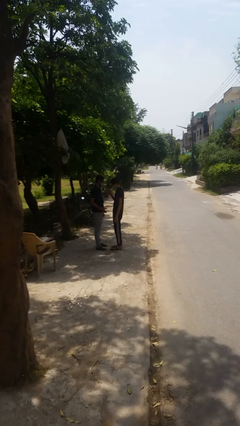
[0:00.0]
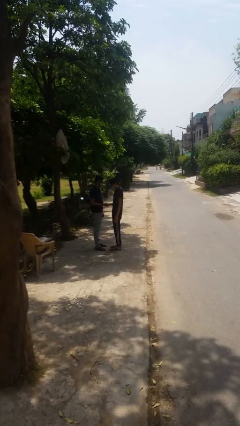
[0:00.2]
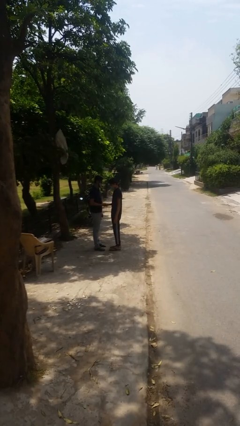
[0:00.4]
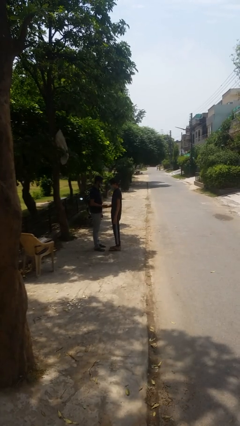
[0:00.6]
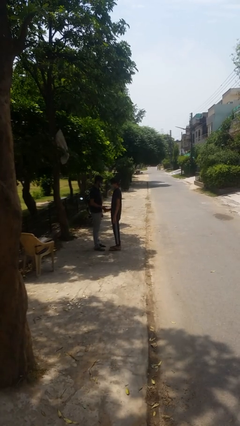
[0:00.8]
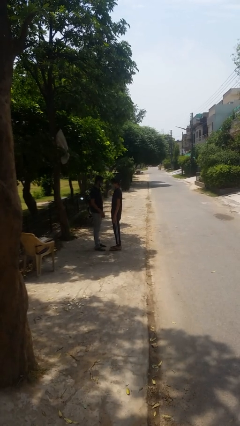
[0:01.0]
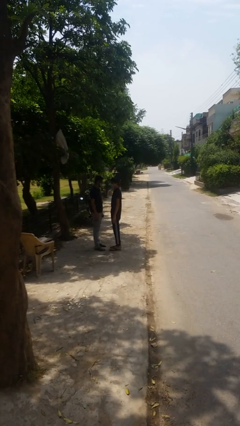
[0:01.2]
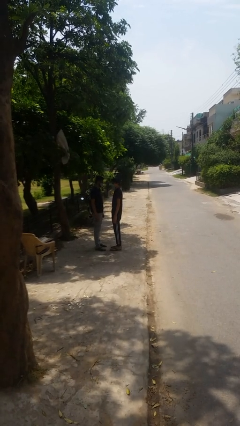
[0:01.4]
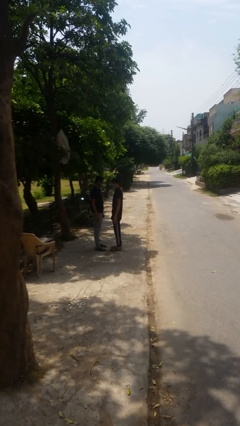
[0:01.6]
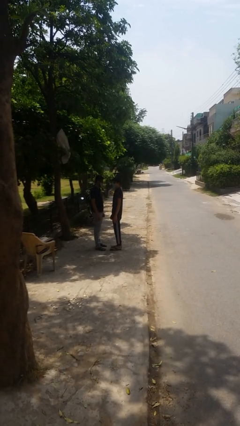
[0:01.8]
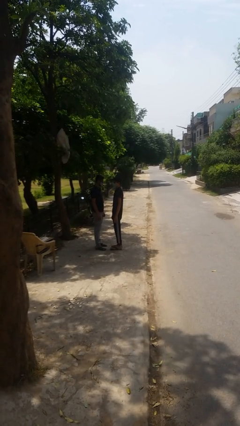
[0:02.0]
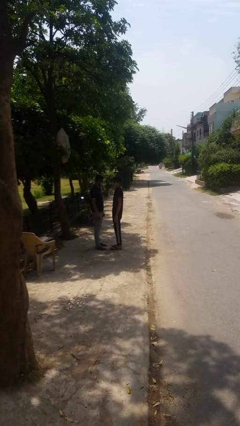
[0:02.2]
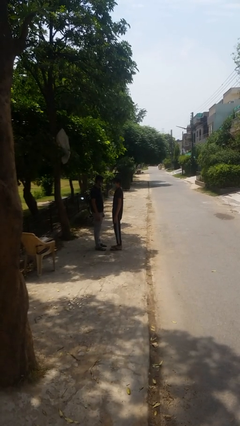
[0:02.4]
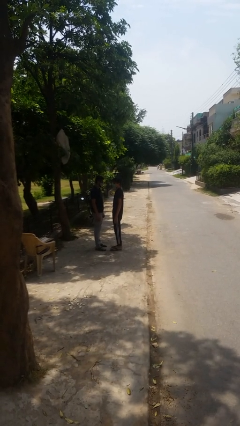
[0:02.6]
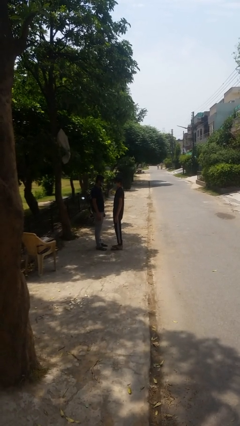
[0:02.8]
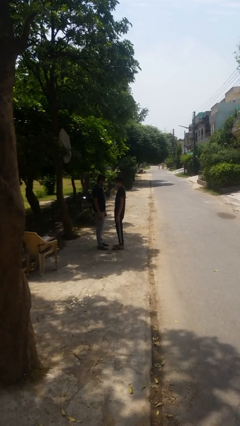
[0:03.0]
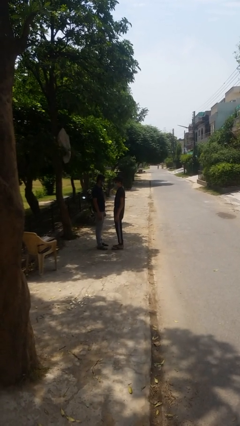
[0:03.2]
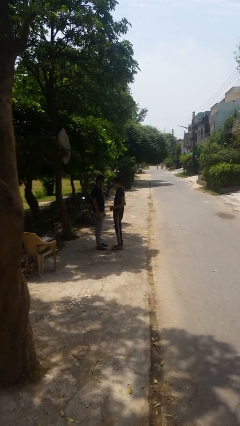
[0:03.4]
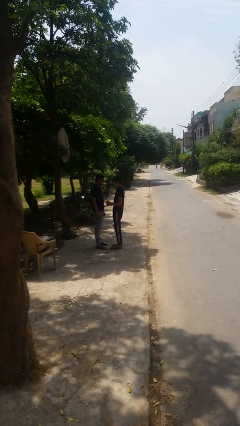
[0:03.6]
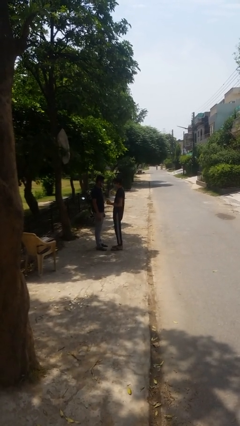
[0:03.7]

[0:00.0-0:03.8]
person highfives hand

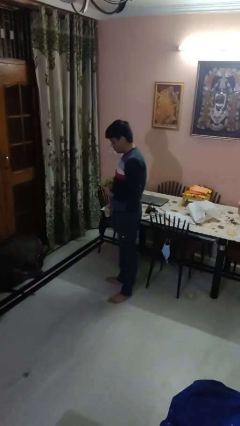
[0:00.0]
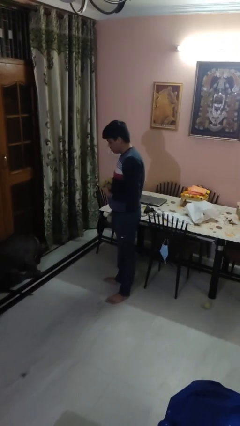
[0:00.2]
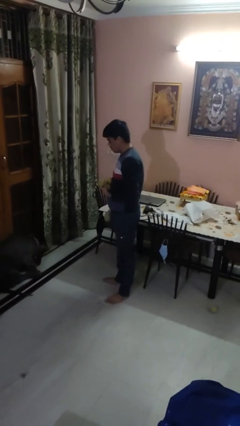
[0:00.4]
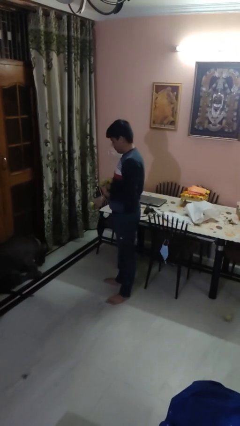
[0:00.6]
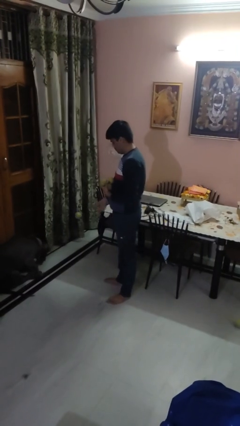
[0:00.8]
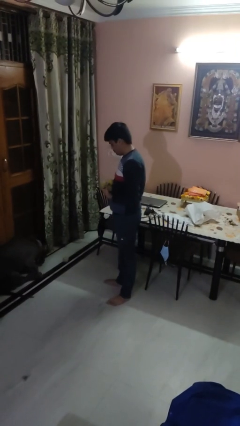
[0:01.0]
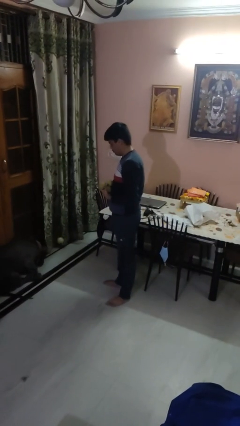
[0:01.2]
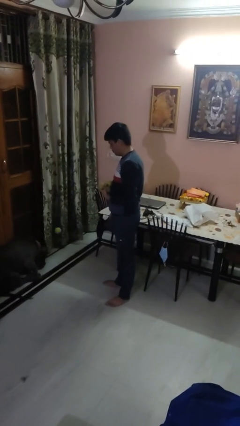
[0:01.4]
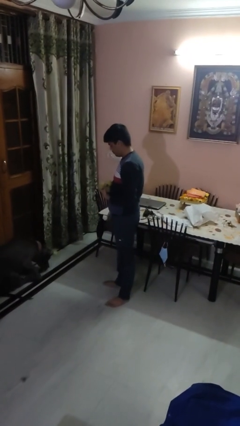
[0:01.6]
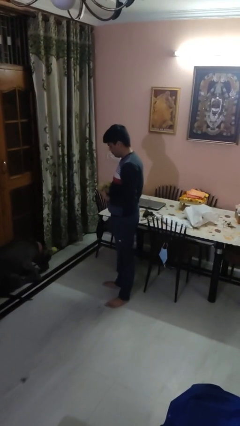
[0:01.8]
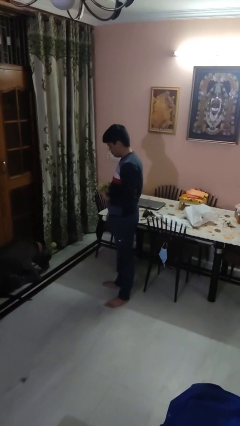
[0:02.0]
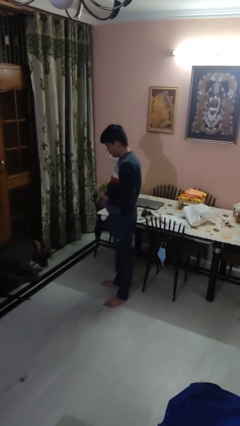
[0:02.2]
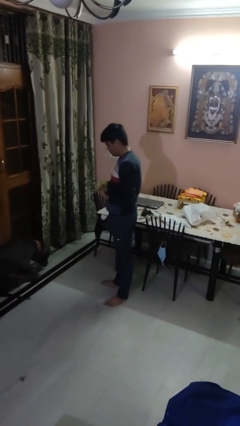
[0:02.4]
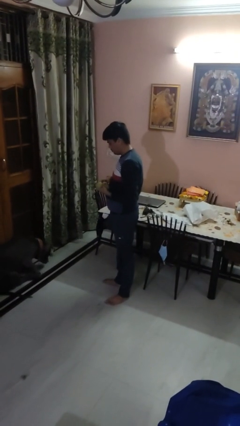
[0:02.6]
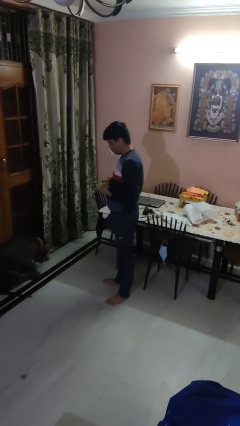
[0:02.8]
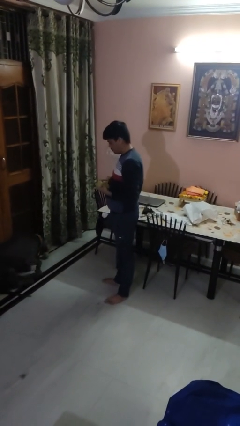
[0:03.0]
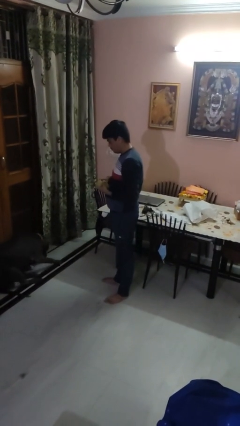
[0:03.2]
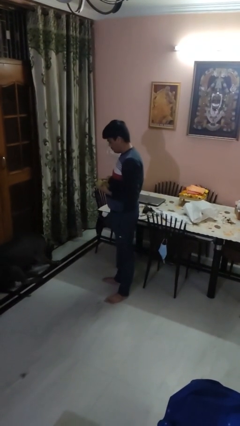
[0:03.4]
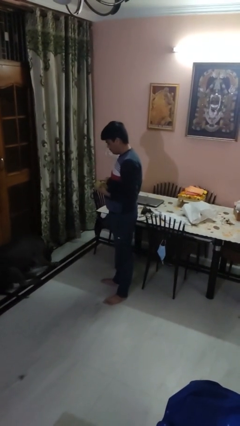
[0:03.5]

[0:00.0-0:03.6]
person throws object to dog

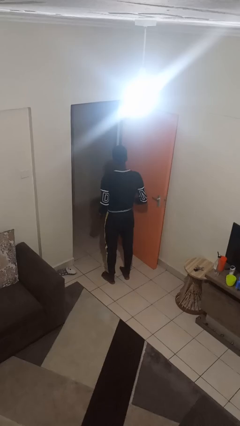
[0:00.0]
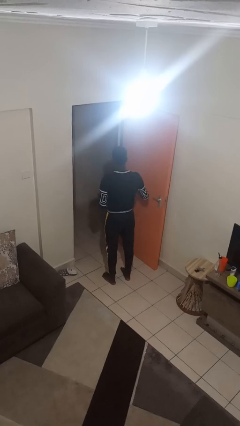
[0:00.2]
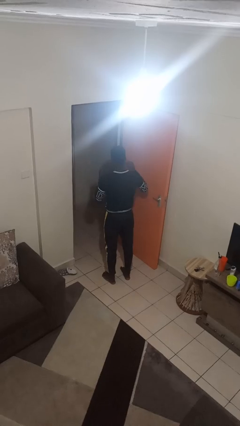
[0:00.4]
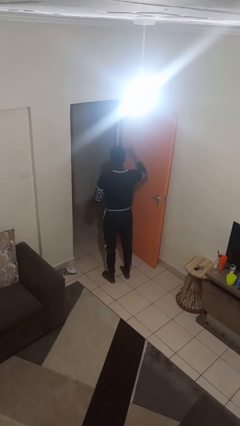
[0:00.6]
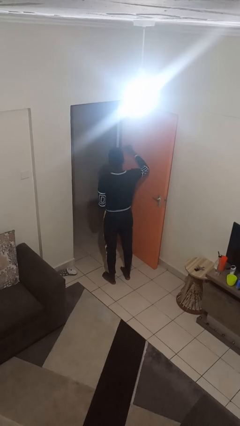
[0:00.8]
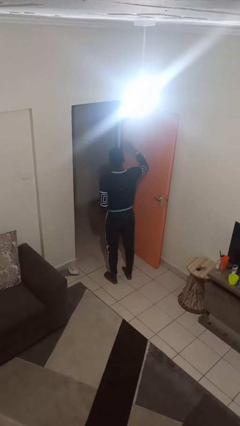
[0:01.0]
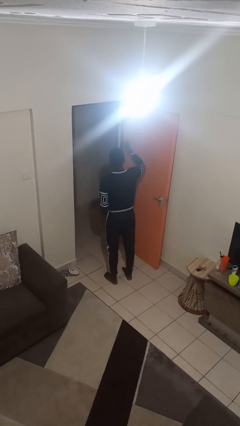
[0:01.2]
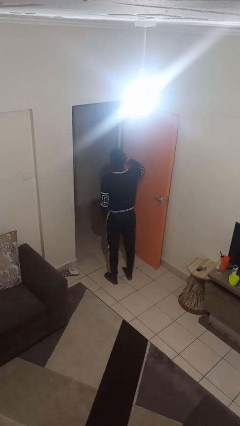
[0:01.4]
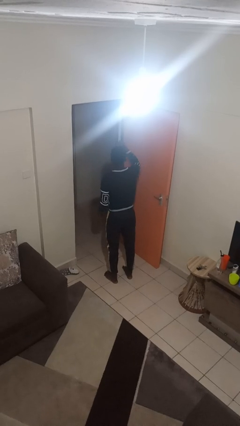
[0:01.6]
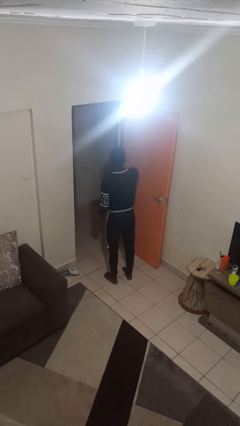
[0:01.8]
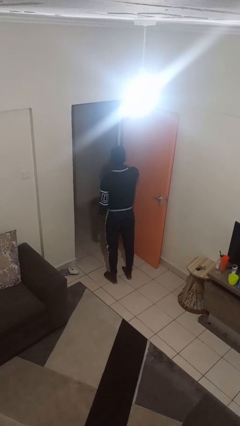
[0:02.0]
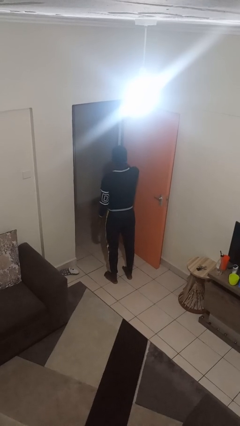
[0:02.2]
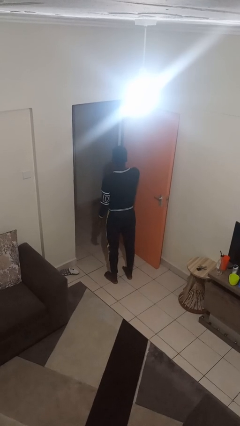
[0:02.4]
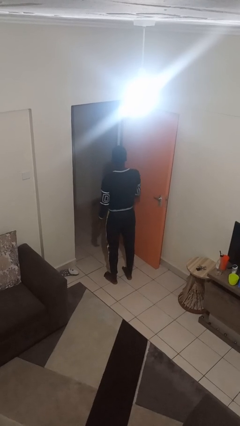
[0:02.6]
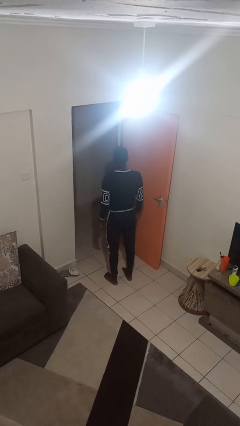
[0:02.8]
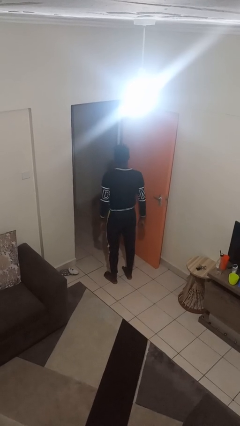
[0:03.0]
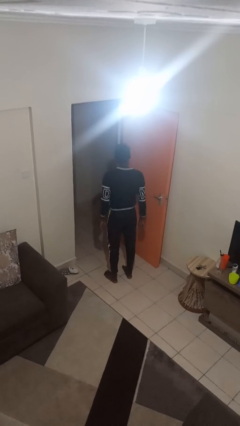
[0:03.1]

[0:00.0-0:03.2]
person snaps fingers

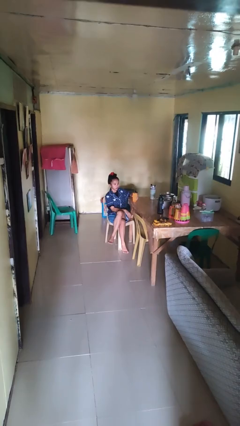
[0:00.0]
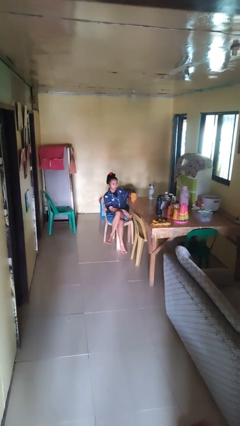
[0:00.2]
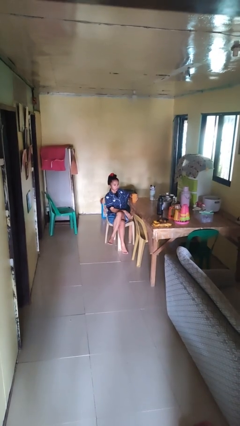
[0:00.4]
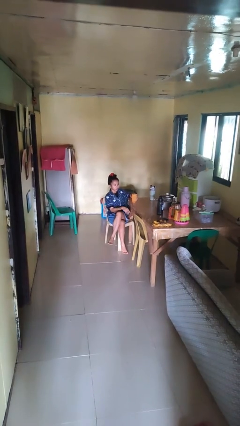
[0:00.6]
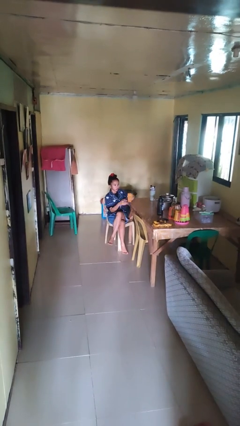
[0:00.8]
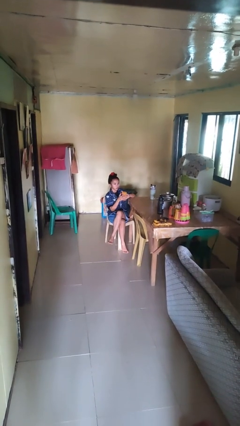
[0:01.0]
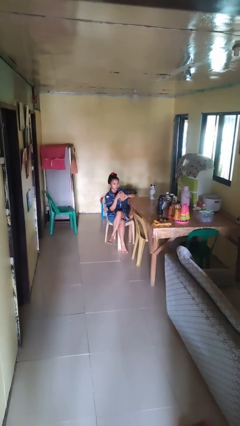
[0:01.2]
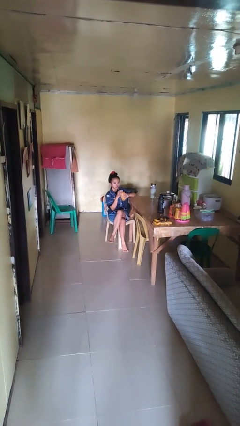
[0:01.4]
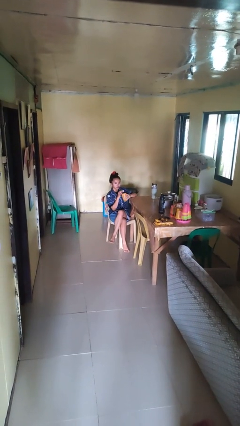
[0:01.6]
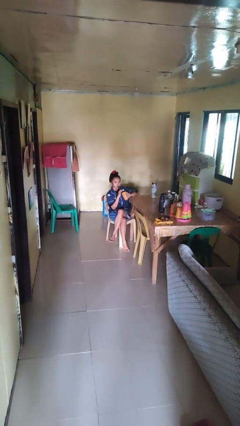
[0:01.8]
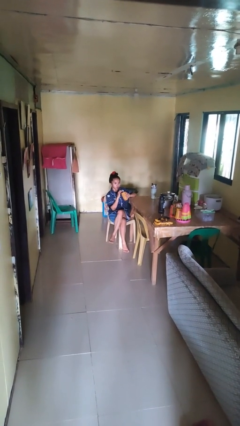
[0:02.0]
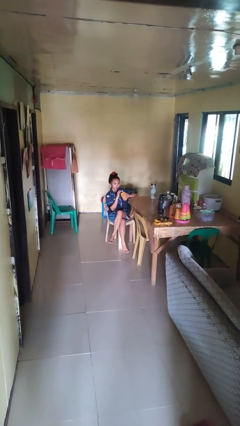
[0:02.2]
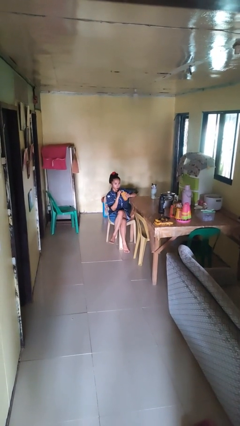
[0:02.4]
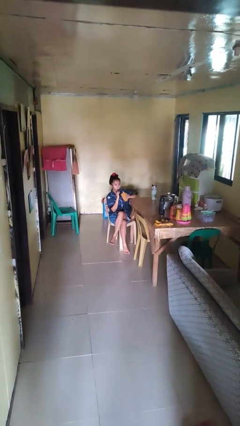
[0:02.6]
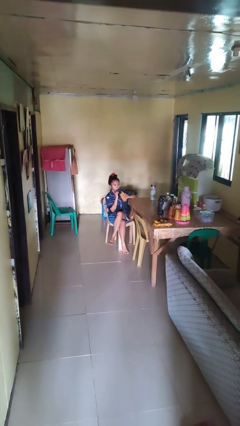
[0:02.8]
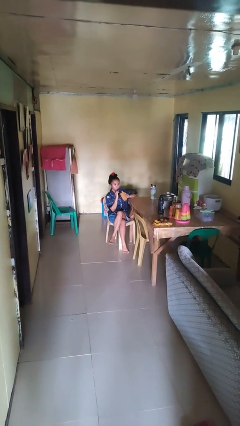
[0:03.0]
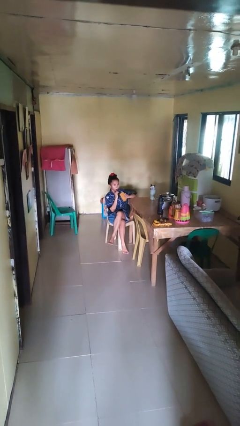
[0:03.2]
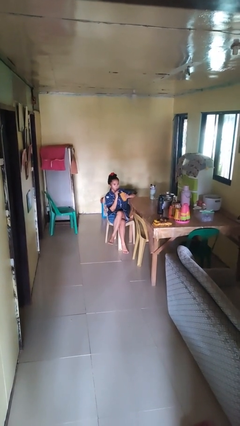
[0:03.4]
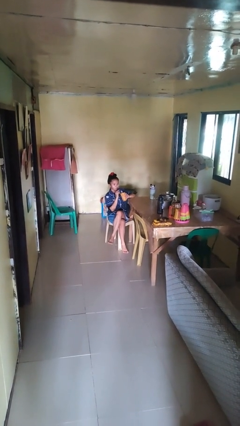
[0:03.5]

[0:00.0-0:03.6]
person drinks from straw

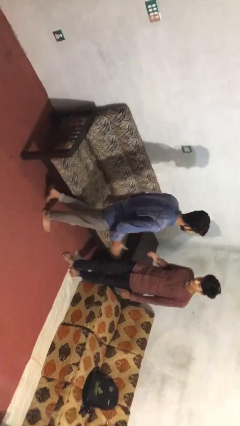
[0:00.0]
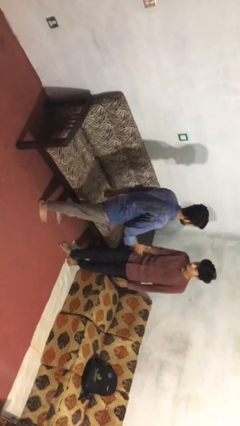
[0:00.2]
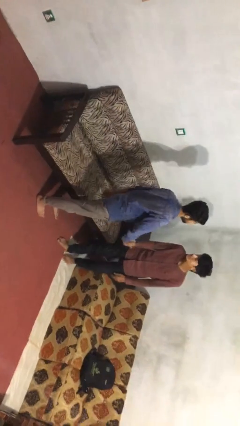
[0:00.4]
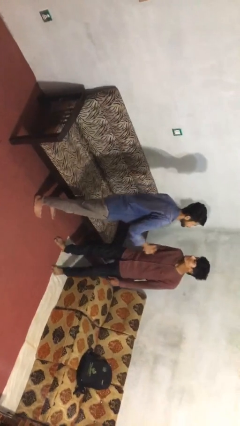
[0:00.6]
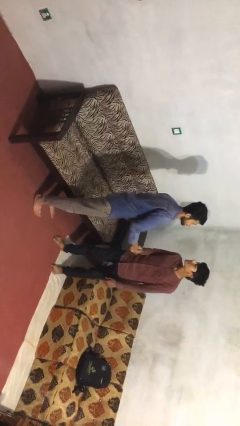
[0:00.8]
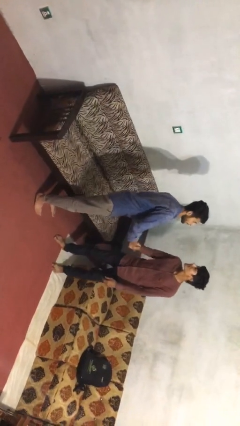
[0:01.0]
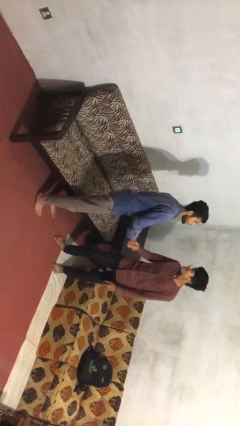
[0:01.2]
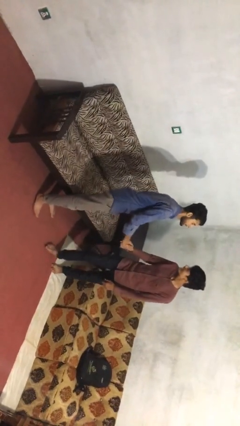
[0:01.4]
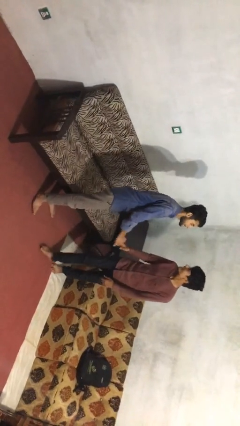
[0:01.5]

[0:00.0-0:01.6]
person shakes hand

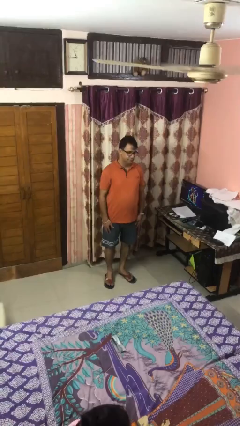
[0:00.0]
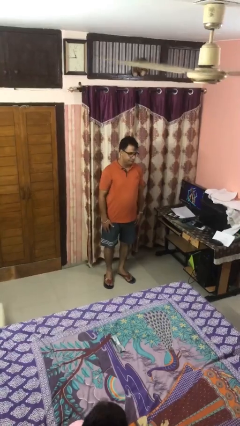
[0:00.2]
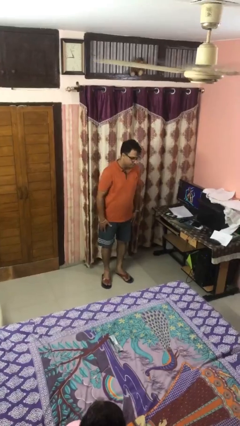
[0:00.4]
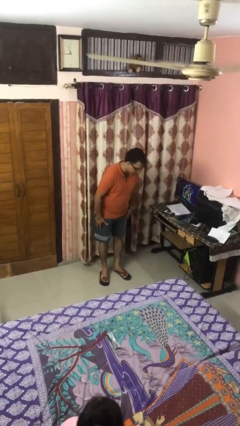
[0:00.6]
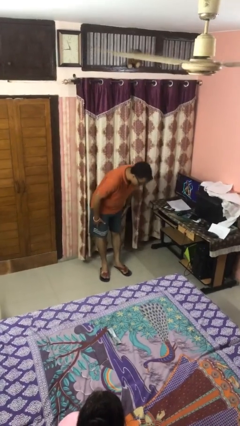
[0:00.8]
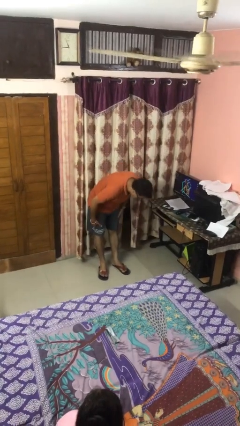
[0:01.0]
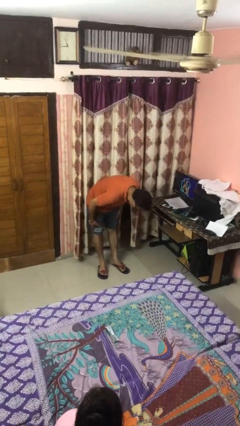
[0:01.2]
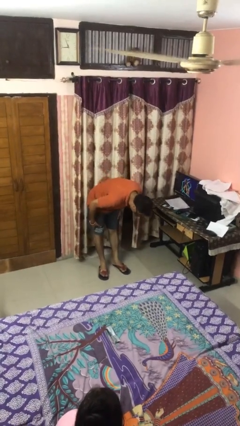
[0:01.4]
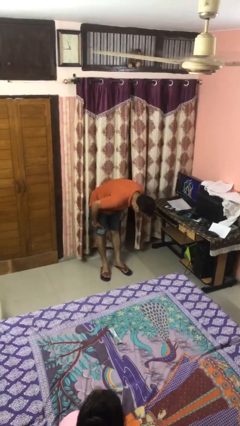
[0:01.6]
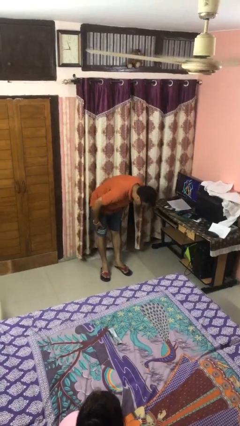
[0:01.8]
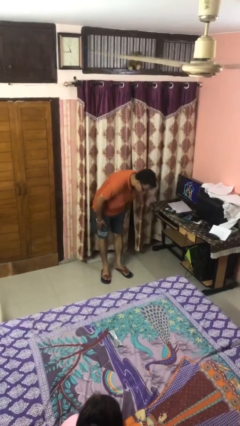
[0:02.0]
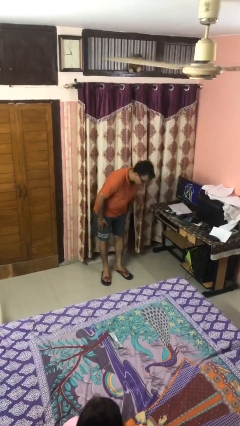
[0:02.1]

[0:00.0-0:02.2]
person bows
